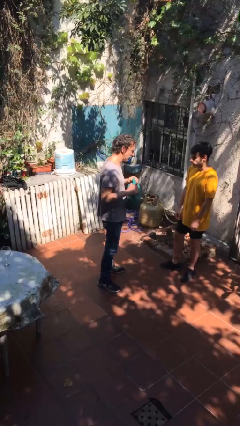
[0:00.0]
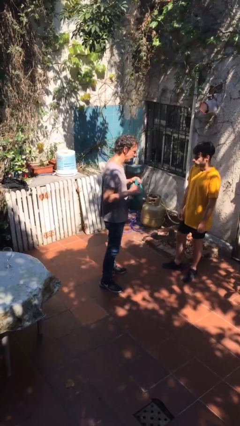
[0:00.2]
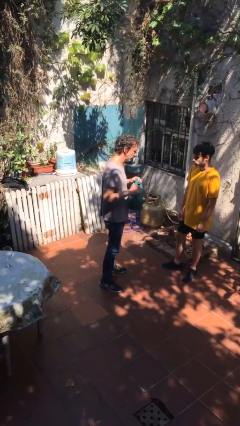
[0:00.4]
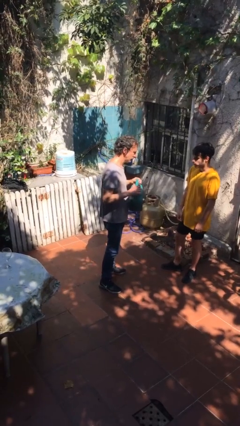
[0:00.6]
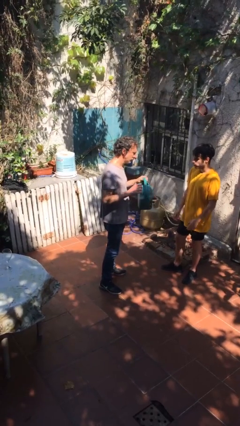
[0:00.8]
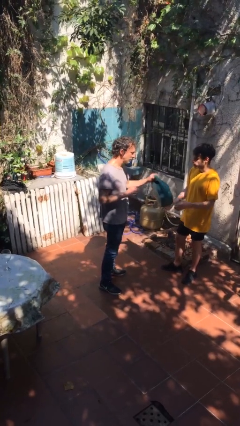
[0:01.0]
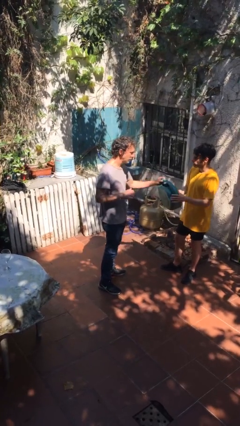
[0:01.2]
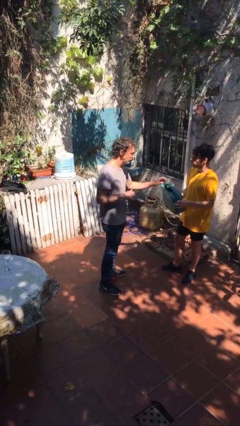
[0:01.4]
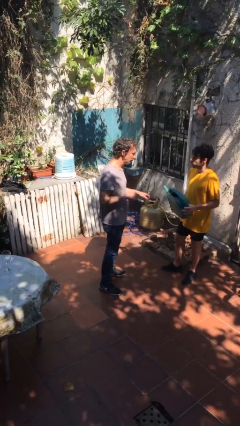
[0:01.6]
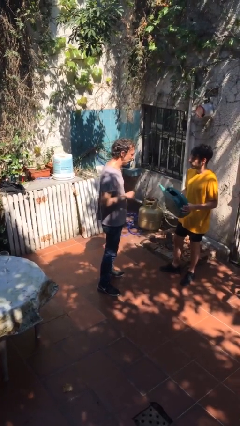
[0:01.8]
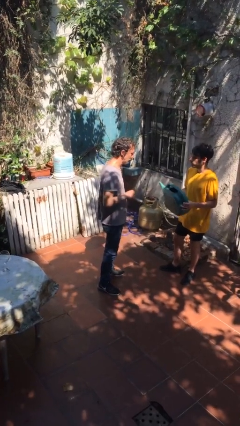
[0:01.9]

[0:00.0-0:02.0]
person transfers object to person

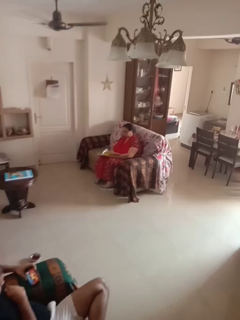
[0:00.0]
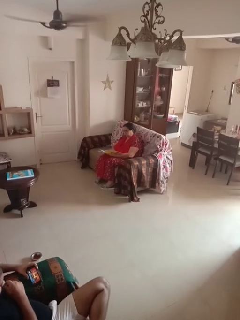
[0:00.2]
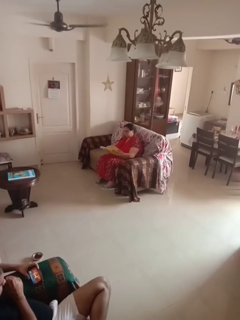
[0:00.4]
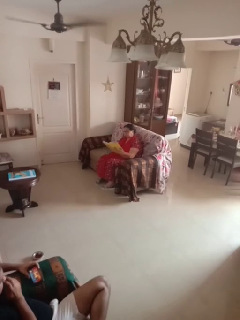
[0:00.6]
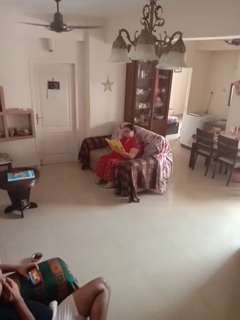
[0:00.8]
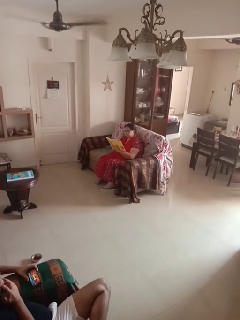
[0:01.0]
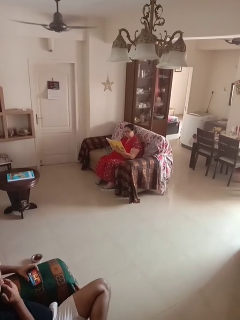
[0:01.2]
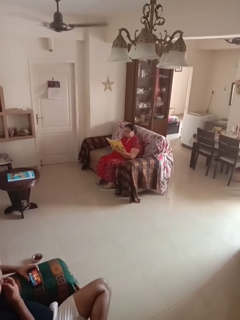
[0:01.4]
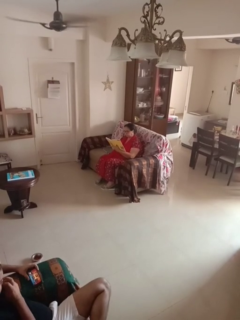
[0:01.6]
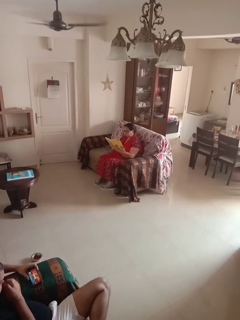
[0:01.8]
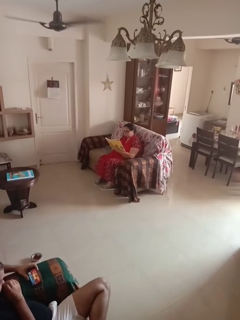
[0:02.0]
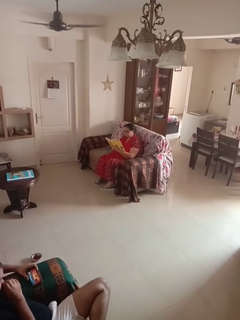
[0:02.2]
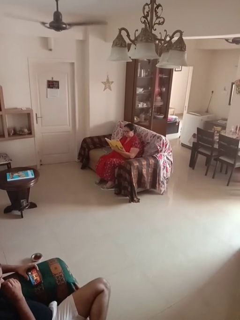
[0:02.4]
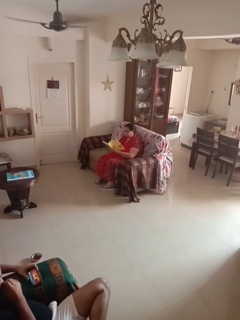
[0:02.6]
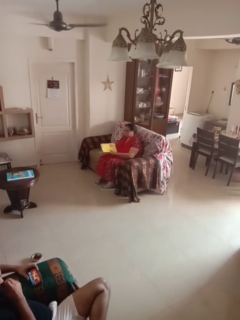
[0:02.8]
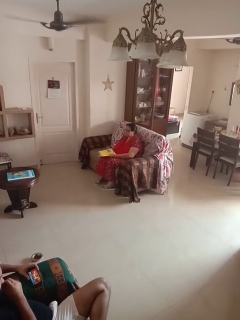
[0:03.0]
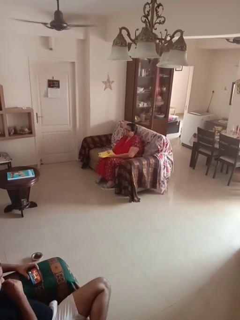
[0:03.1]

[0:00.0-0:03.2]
person reads document

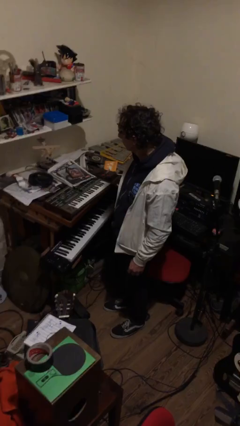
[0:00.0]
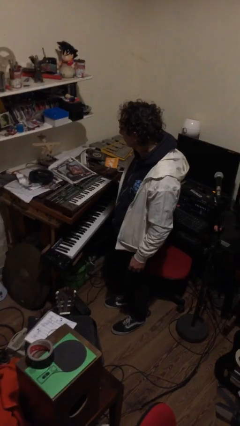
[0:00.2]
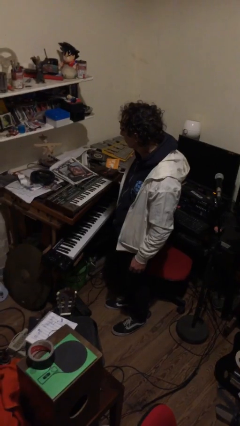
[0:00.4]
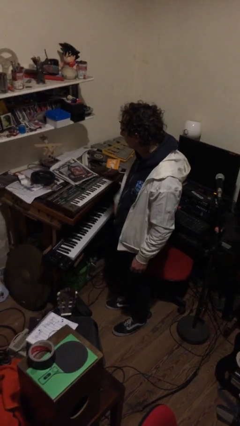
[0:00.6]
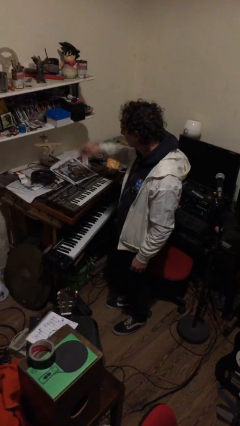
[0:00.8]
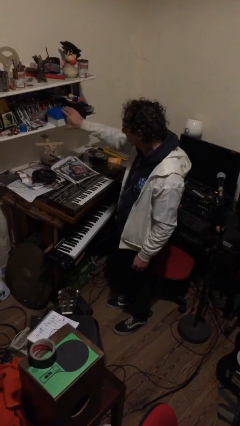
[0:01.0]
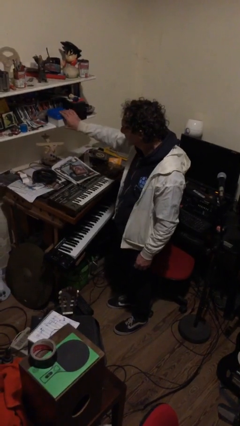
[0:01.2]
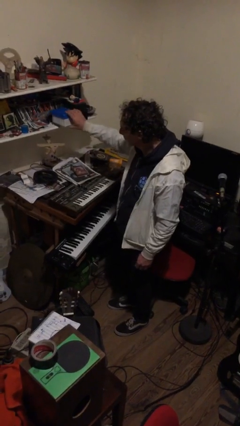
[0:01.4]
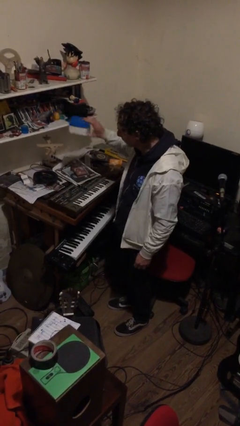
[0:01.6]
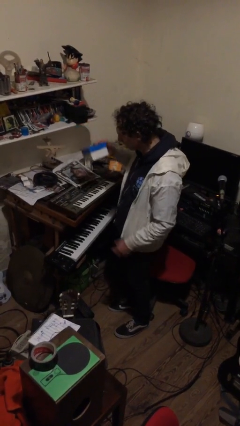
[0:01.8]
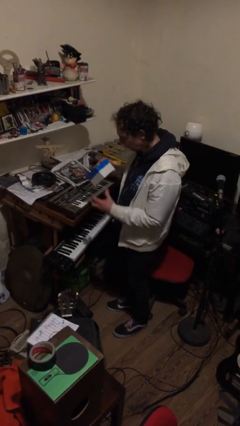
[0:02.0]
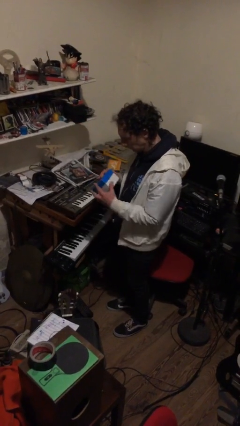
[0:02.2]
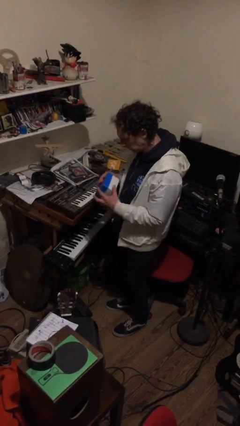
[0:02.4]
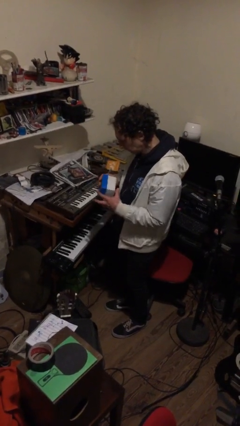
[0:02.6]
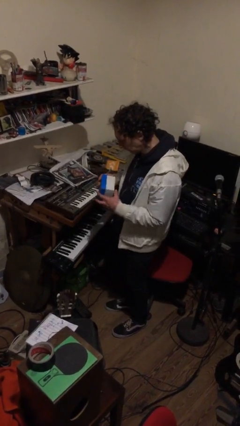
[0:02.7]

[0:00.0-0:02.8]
person picks up object from countertop

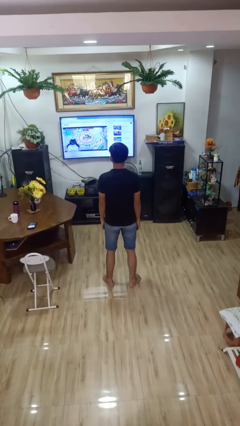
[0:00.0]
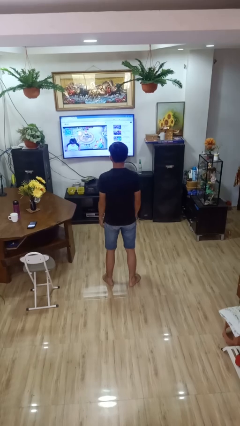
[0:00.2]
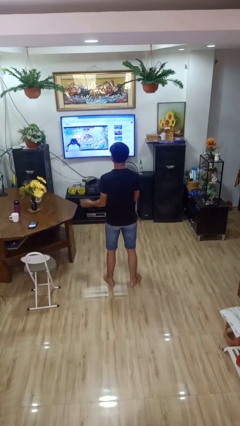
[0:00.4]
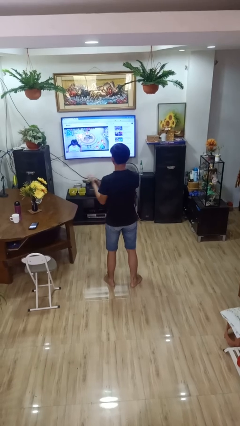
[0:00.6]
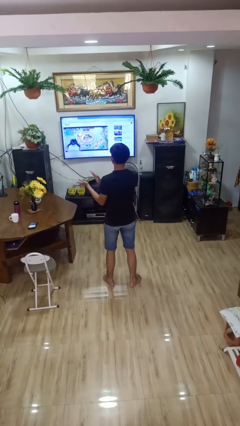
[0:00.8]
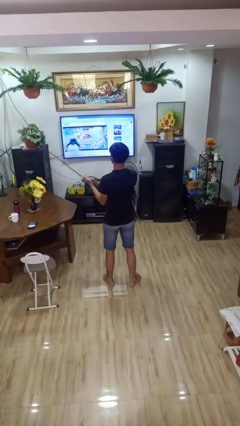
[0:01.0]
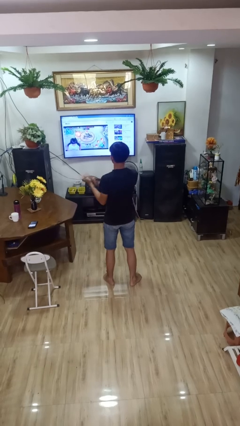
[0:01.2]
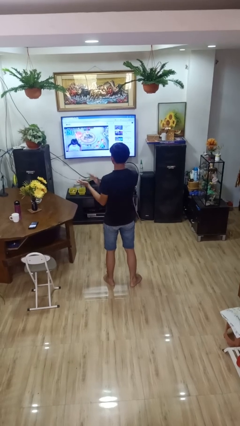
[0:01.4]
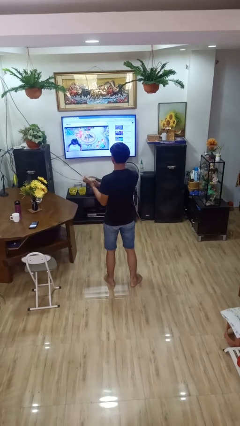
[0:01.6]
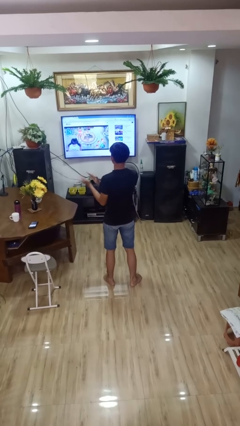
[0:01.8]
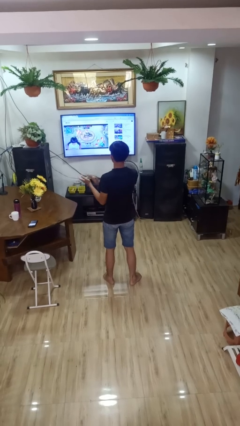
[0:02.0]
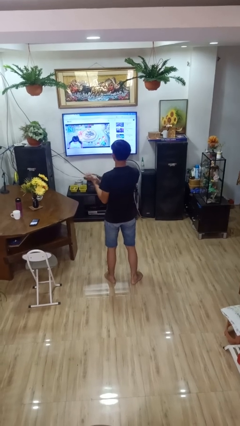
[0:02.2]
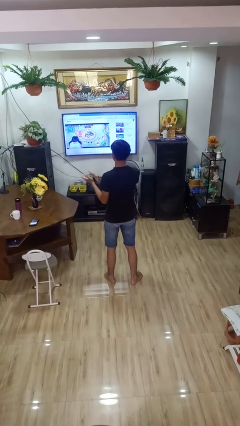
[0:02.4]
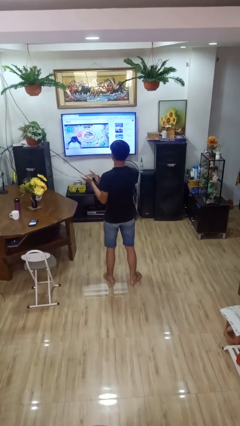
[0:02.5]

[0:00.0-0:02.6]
person claps hands

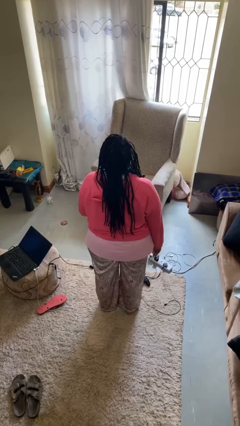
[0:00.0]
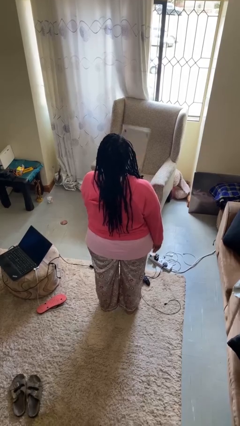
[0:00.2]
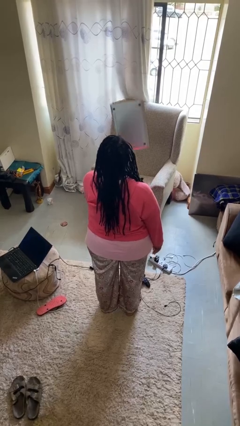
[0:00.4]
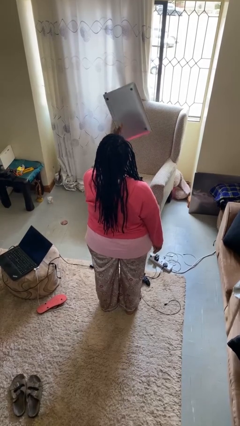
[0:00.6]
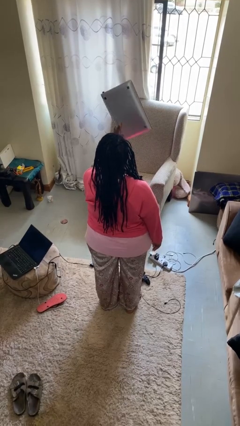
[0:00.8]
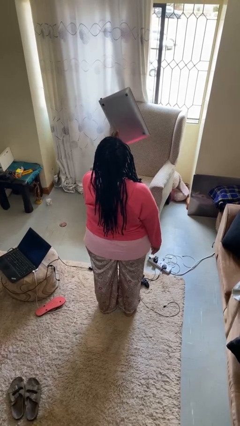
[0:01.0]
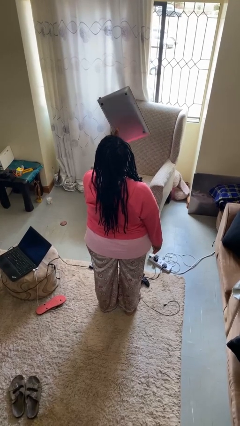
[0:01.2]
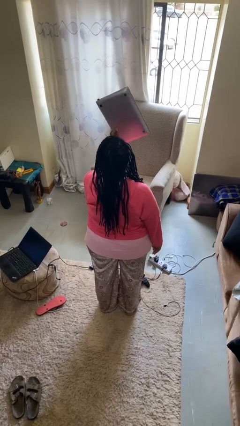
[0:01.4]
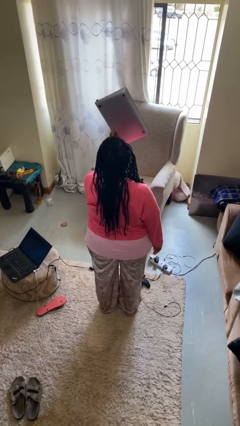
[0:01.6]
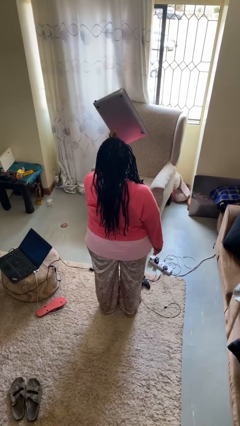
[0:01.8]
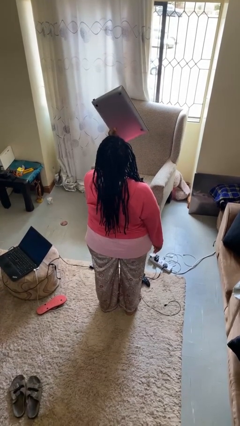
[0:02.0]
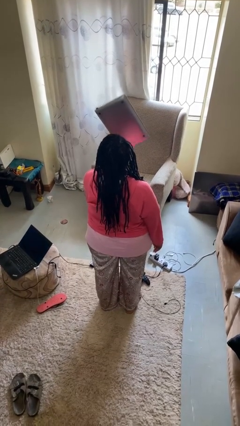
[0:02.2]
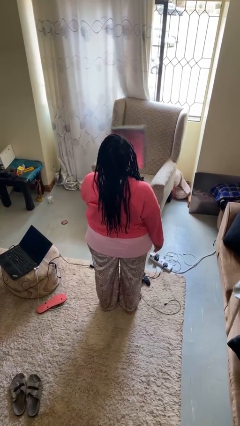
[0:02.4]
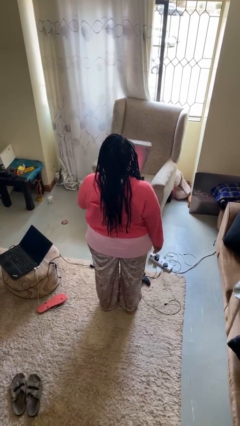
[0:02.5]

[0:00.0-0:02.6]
person holds object above head

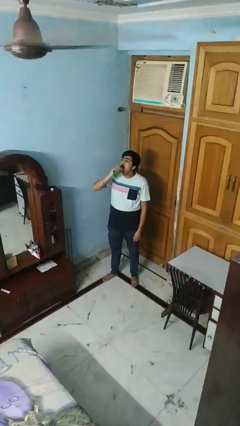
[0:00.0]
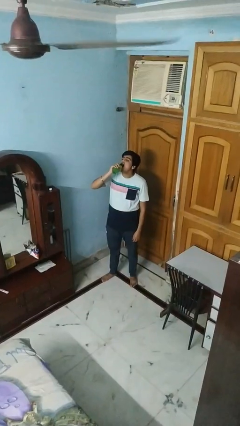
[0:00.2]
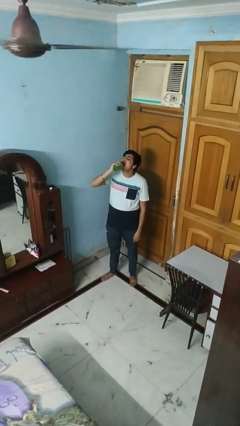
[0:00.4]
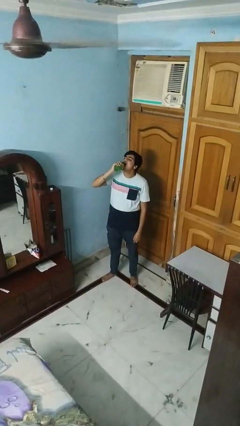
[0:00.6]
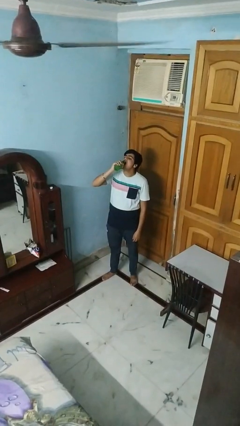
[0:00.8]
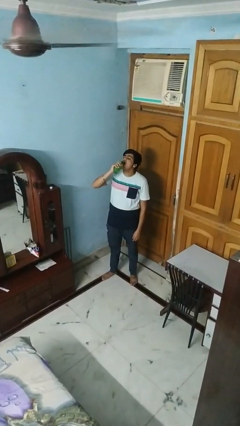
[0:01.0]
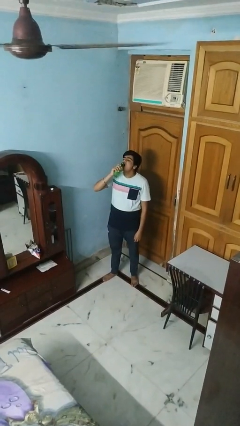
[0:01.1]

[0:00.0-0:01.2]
person drinks from bottle

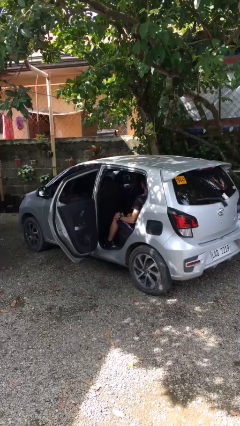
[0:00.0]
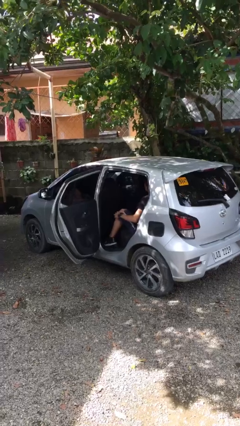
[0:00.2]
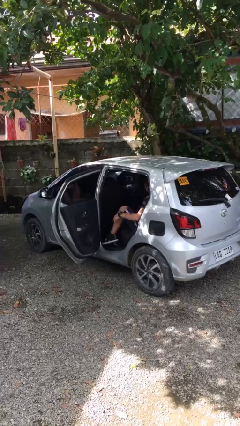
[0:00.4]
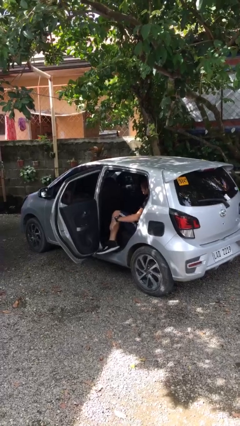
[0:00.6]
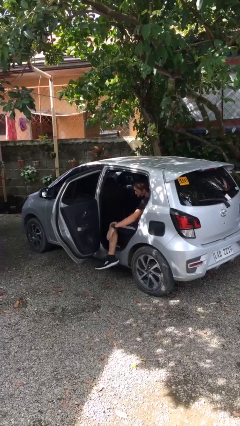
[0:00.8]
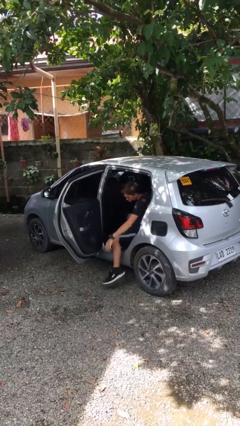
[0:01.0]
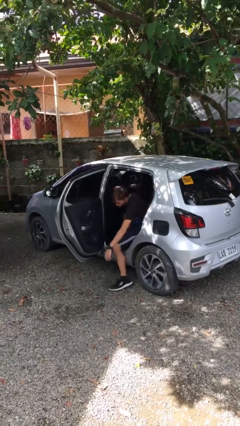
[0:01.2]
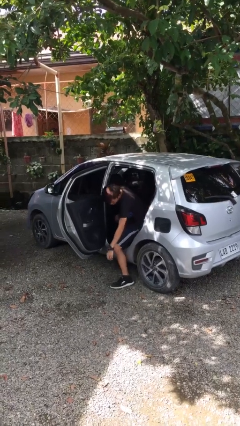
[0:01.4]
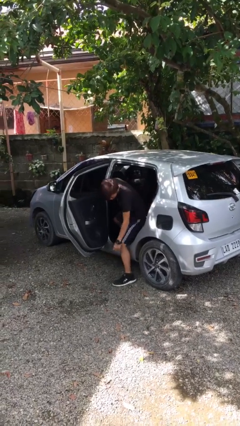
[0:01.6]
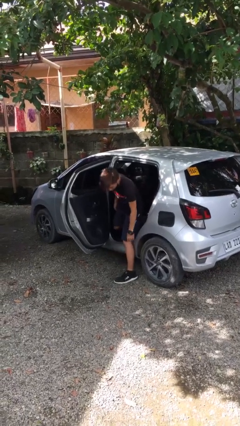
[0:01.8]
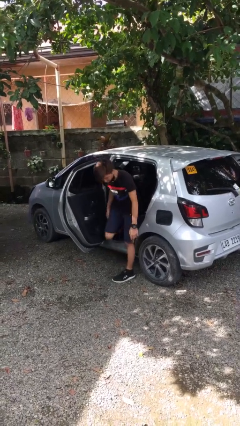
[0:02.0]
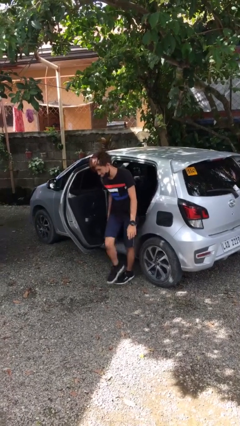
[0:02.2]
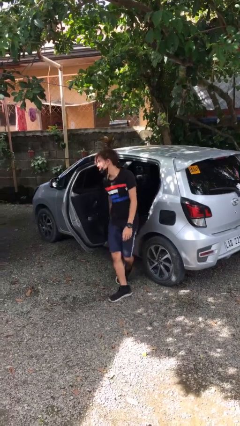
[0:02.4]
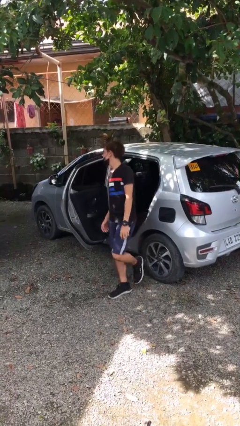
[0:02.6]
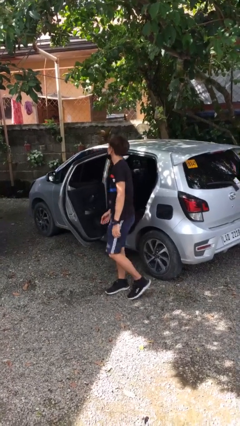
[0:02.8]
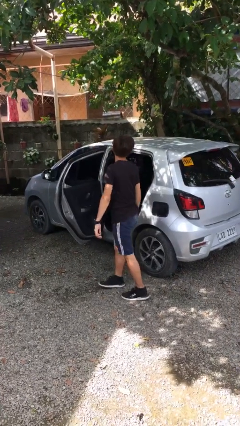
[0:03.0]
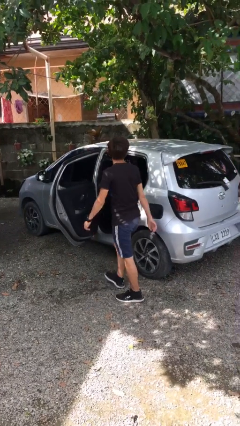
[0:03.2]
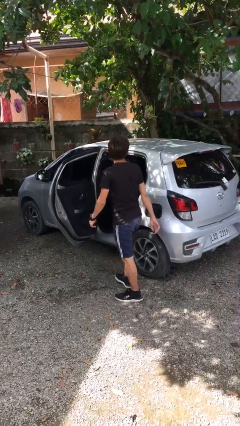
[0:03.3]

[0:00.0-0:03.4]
person exits car
